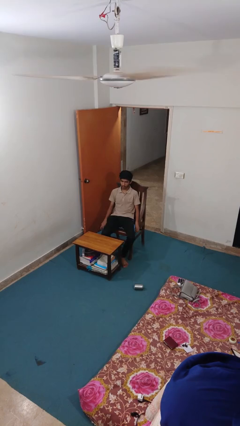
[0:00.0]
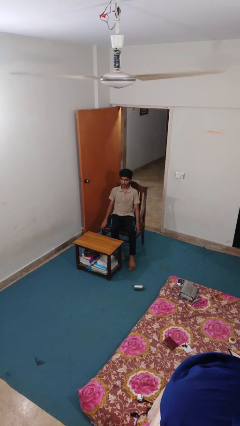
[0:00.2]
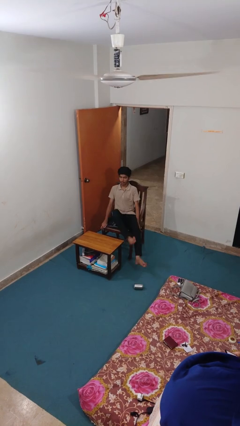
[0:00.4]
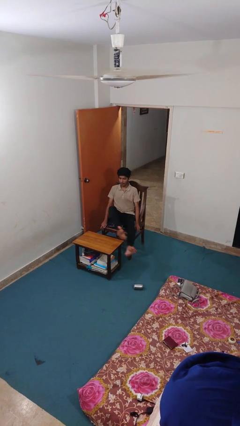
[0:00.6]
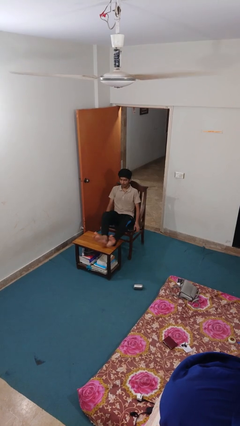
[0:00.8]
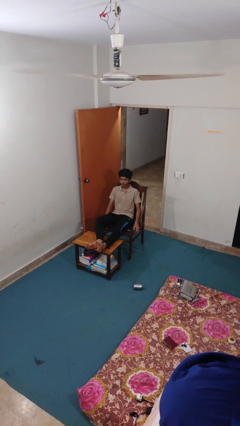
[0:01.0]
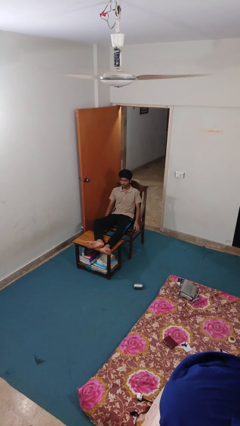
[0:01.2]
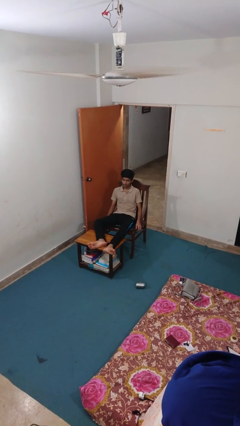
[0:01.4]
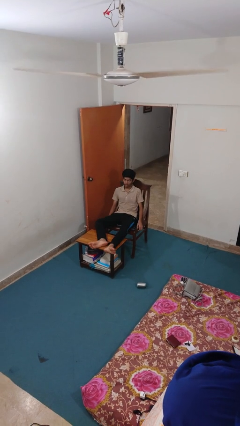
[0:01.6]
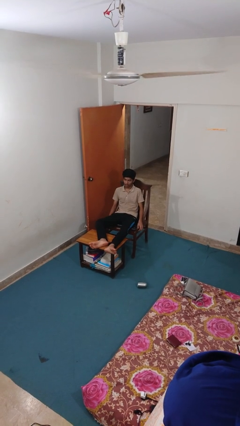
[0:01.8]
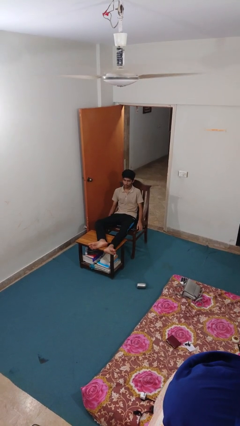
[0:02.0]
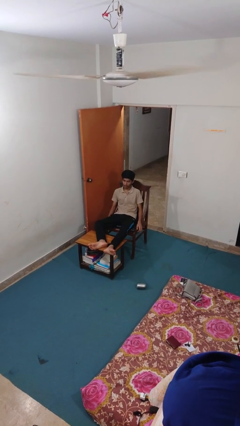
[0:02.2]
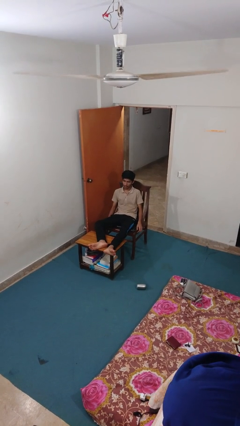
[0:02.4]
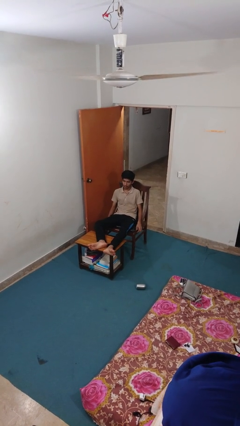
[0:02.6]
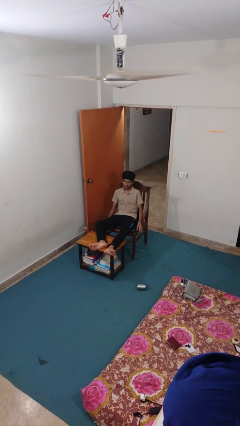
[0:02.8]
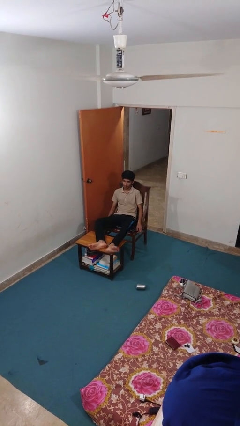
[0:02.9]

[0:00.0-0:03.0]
person puts feet up

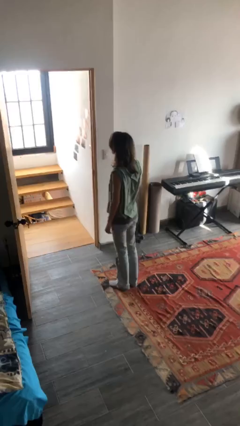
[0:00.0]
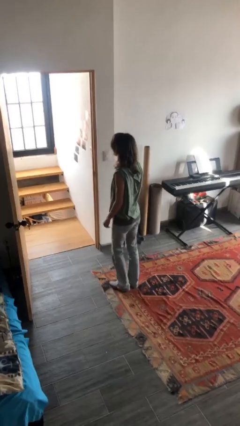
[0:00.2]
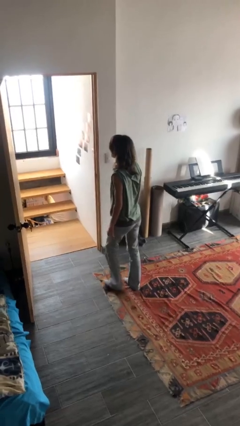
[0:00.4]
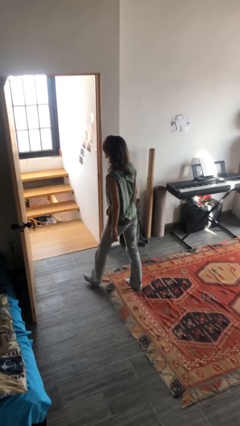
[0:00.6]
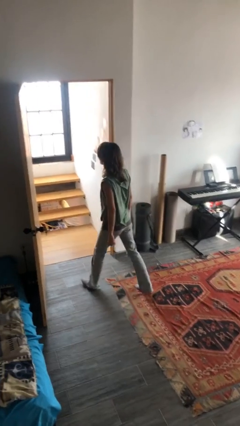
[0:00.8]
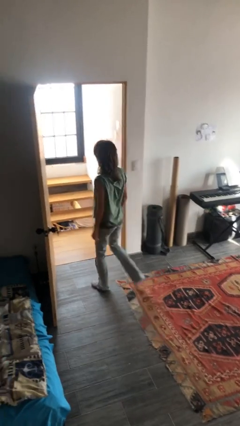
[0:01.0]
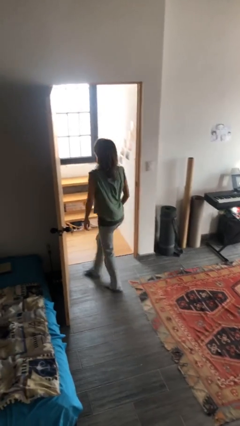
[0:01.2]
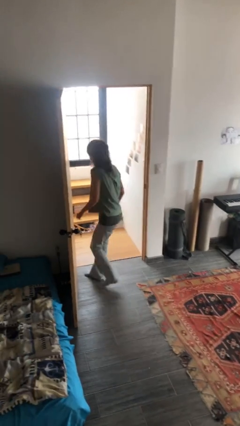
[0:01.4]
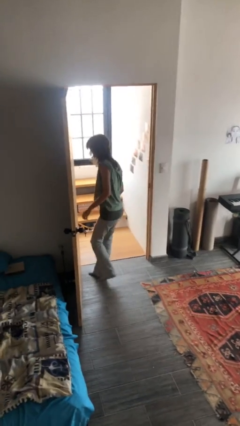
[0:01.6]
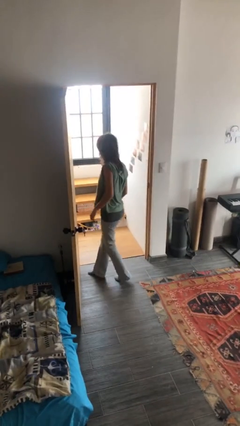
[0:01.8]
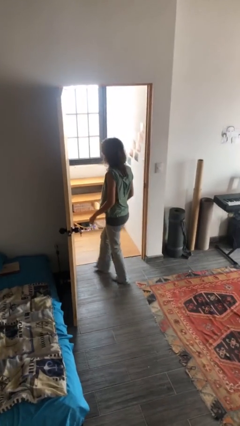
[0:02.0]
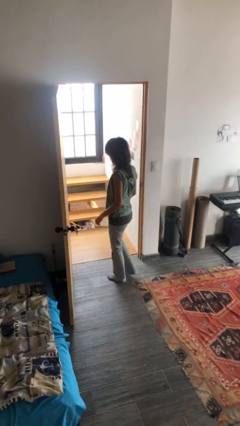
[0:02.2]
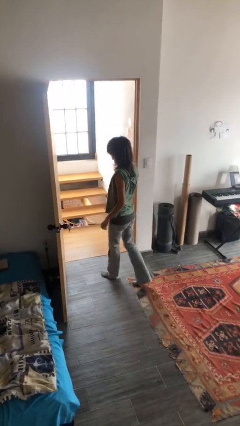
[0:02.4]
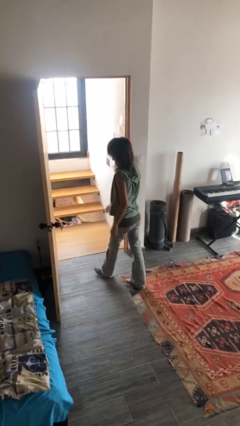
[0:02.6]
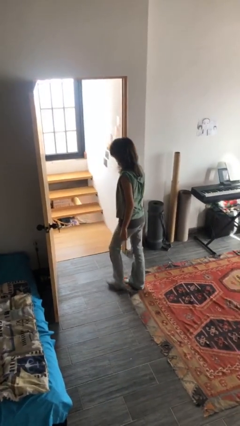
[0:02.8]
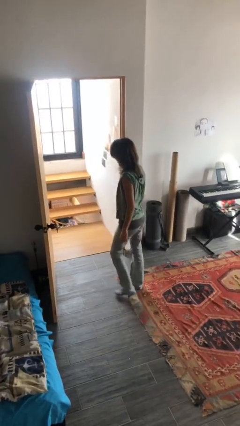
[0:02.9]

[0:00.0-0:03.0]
person bumps into wall

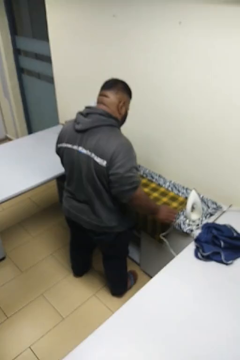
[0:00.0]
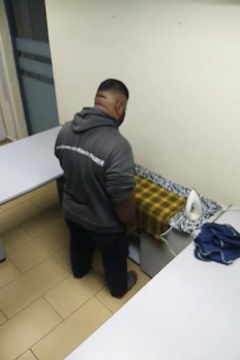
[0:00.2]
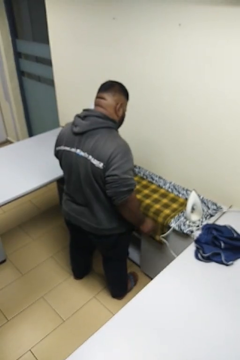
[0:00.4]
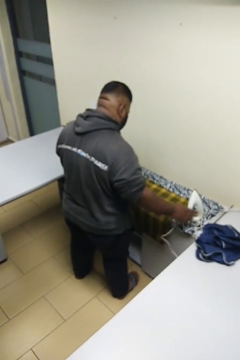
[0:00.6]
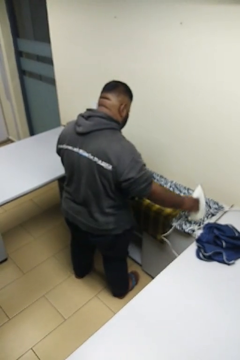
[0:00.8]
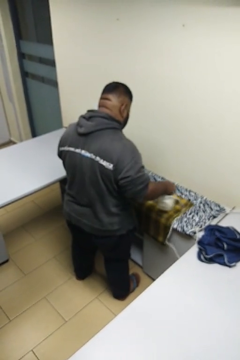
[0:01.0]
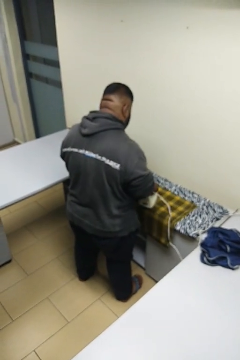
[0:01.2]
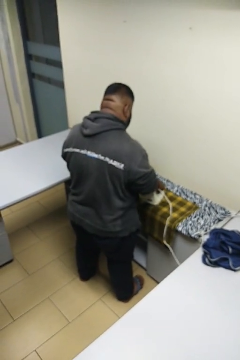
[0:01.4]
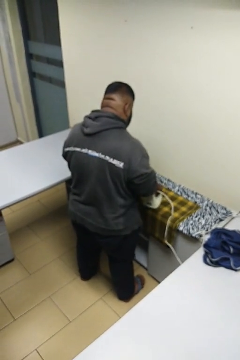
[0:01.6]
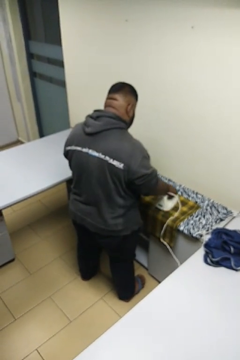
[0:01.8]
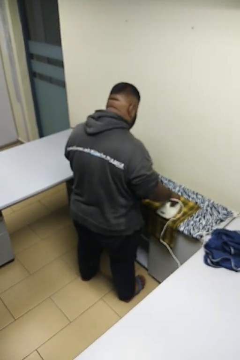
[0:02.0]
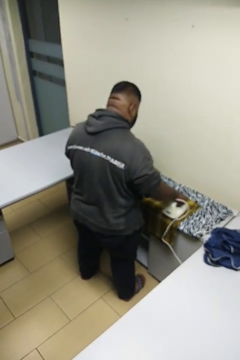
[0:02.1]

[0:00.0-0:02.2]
person irons clothes

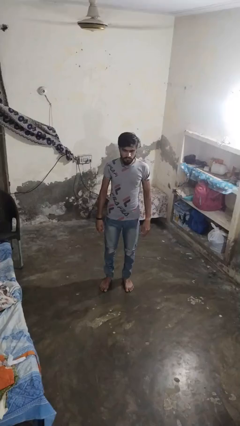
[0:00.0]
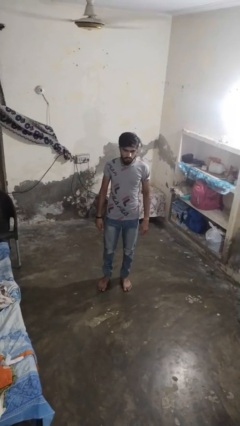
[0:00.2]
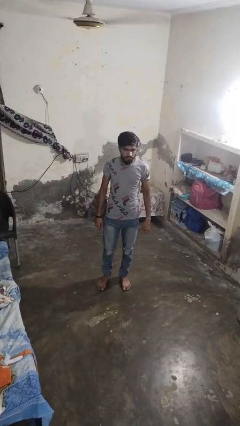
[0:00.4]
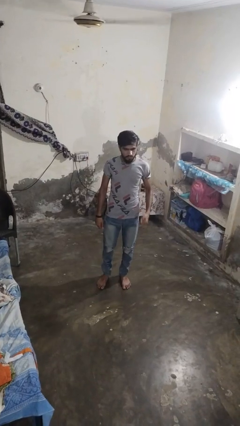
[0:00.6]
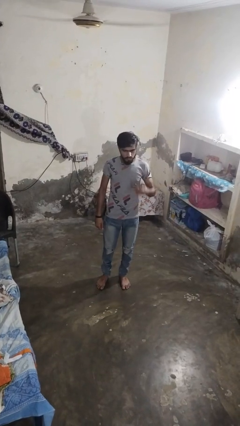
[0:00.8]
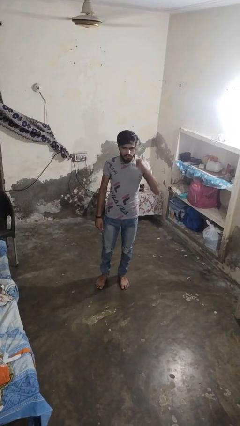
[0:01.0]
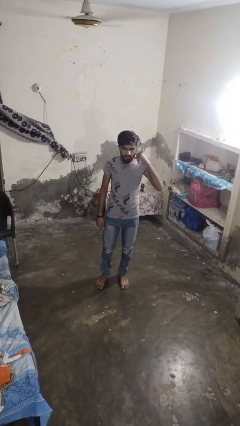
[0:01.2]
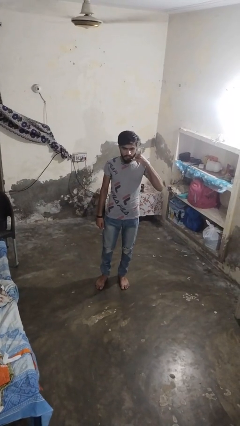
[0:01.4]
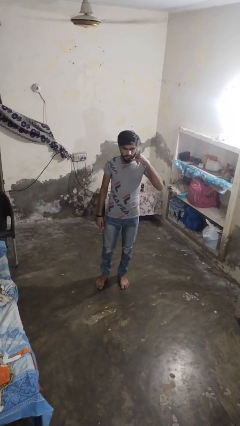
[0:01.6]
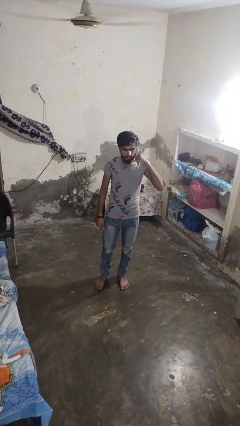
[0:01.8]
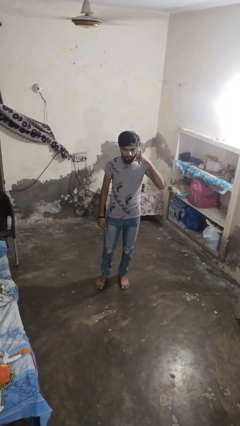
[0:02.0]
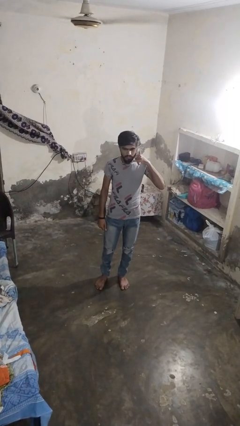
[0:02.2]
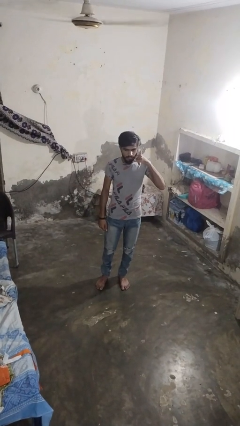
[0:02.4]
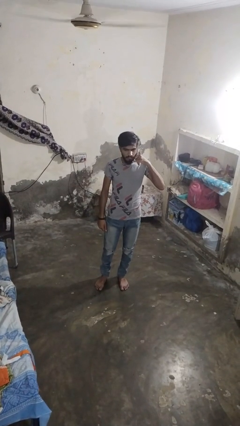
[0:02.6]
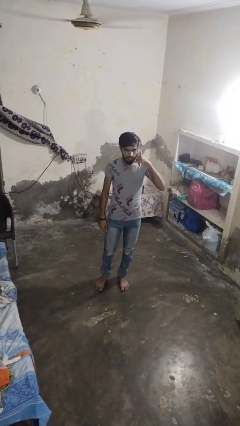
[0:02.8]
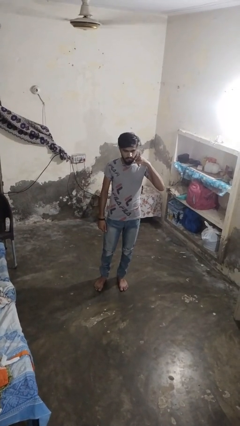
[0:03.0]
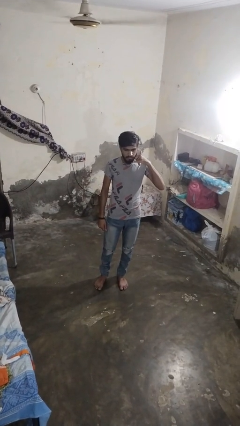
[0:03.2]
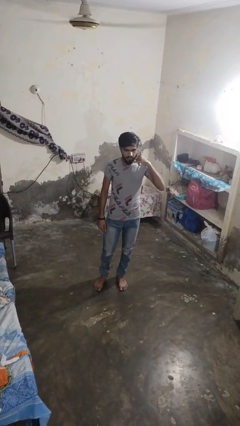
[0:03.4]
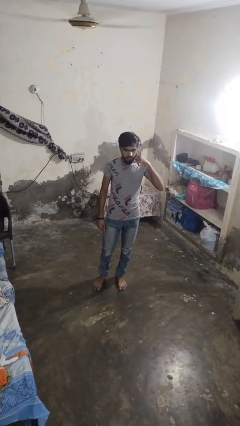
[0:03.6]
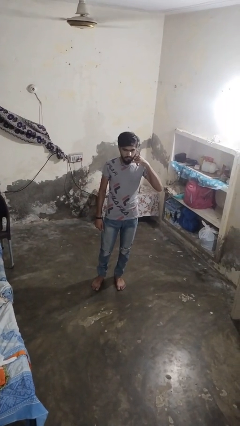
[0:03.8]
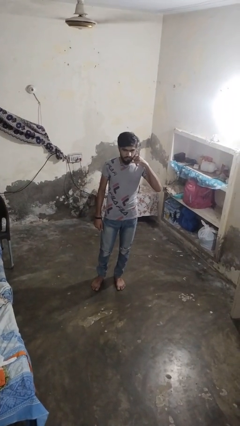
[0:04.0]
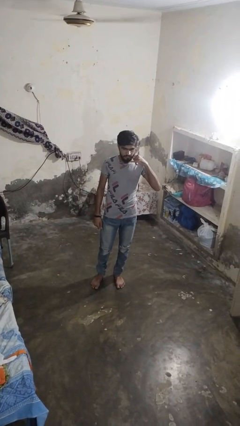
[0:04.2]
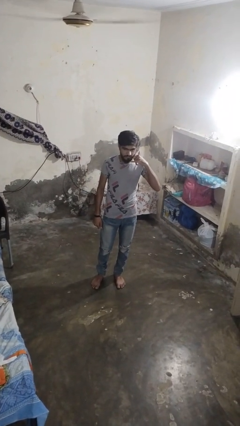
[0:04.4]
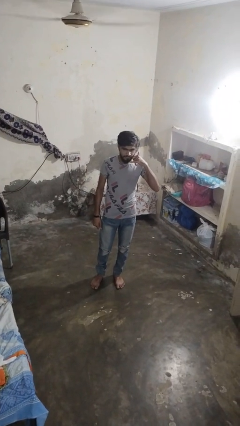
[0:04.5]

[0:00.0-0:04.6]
person gestures call me

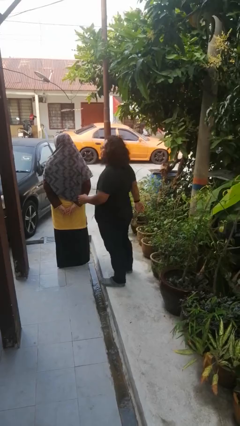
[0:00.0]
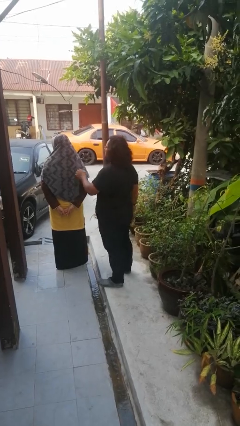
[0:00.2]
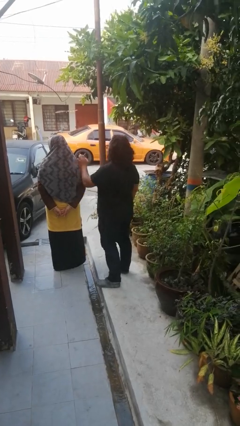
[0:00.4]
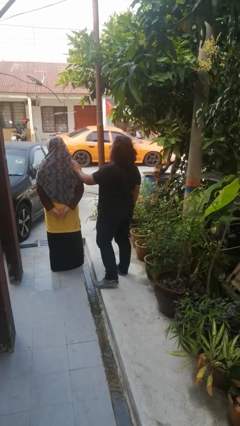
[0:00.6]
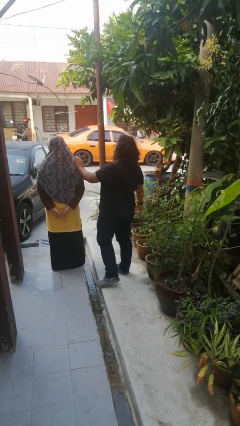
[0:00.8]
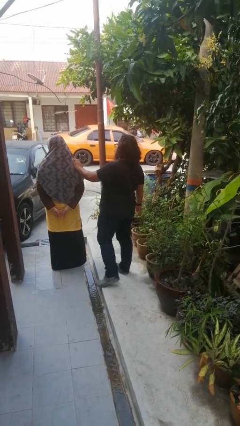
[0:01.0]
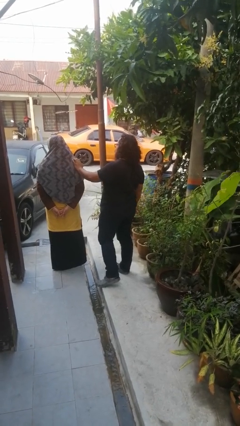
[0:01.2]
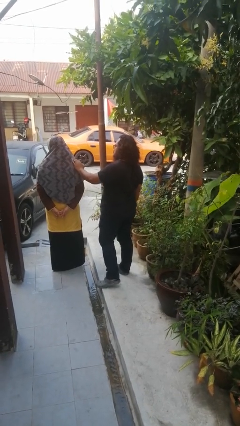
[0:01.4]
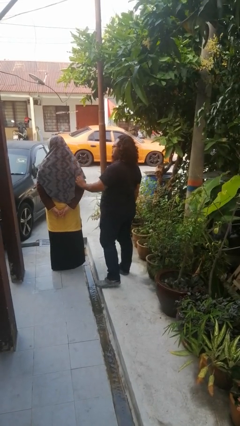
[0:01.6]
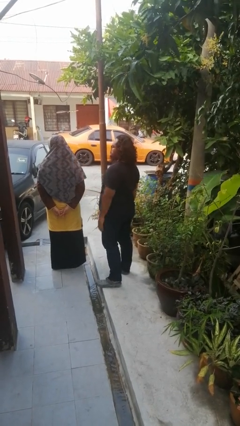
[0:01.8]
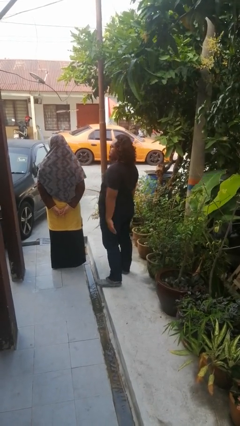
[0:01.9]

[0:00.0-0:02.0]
person touches back of person

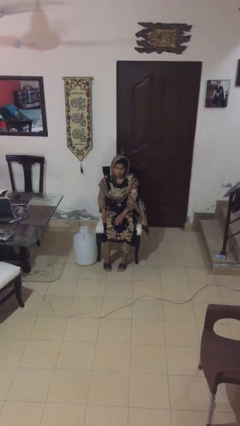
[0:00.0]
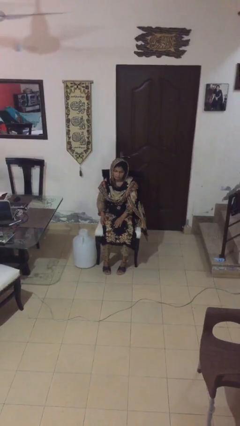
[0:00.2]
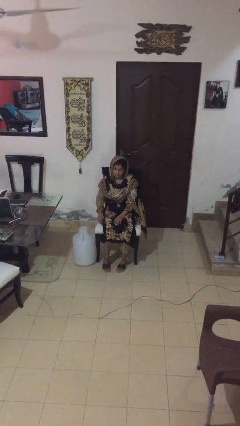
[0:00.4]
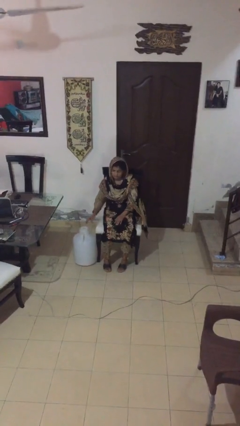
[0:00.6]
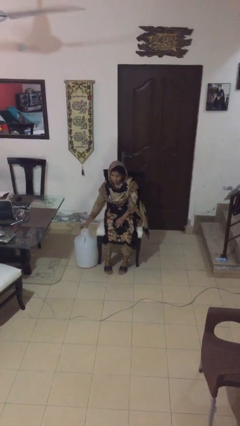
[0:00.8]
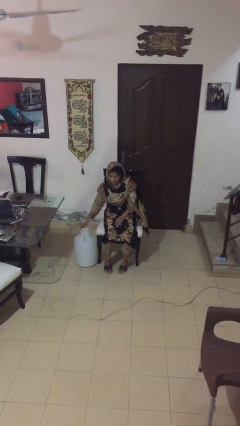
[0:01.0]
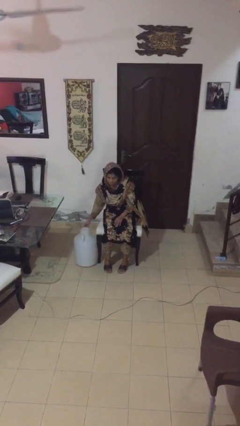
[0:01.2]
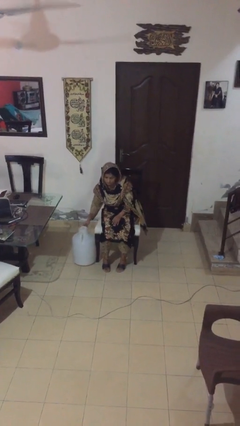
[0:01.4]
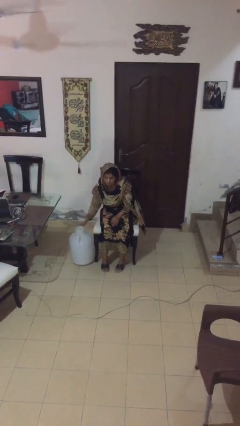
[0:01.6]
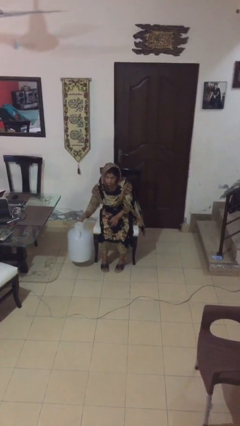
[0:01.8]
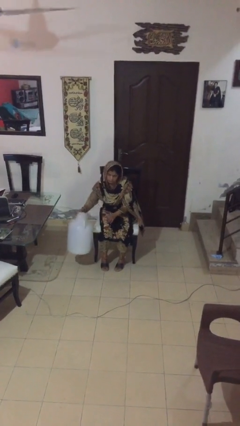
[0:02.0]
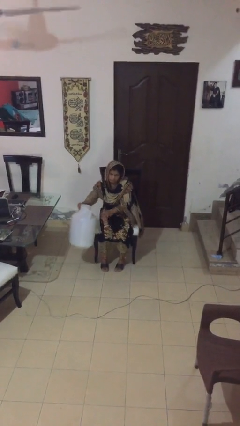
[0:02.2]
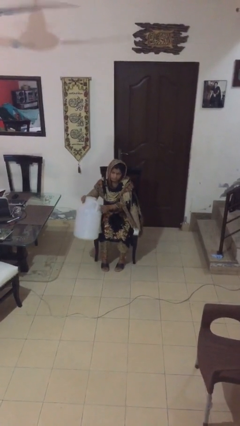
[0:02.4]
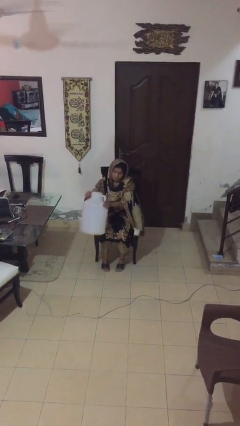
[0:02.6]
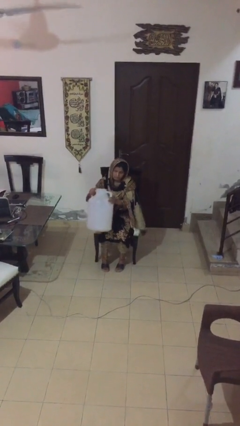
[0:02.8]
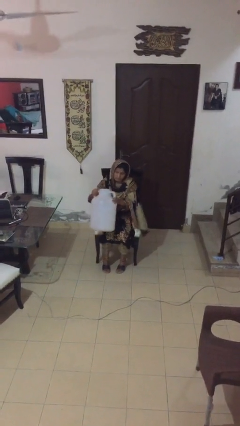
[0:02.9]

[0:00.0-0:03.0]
person picks up object from floor
